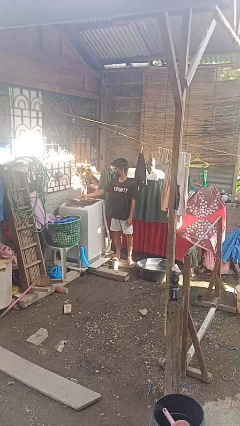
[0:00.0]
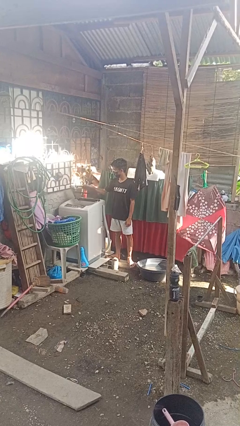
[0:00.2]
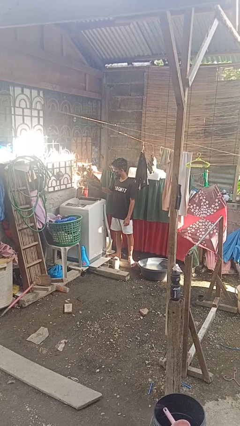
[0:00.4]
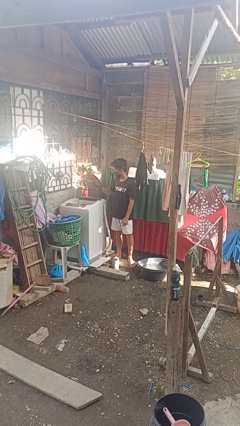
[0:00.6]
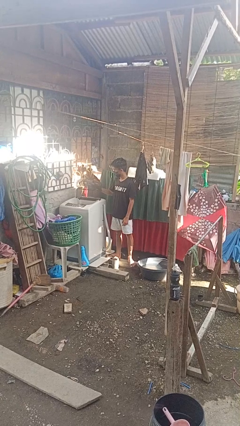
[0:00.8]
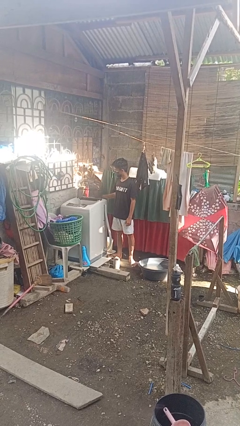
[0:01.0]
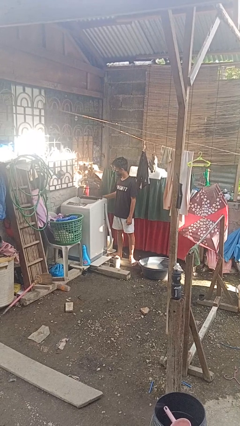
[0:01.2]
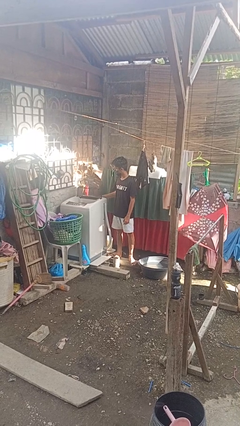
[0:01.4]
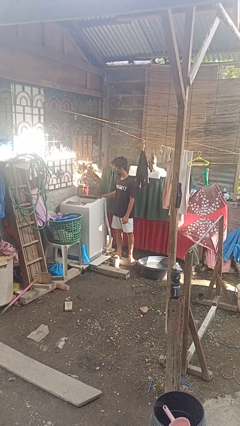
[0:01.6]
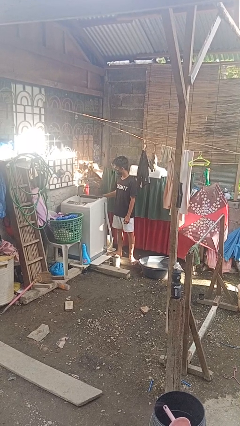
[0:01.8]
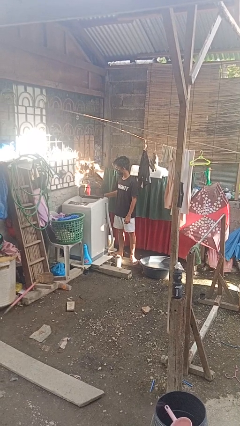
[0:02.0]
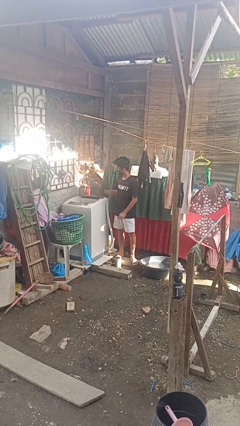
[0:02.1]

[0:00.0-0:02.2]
person opens clothes washer

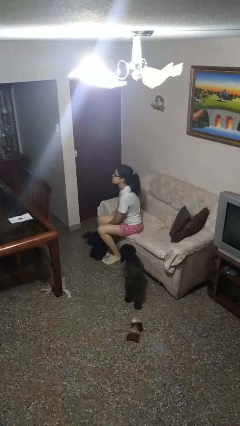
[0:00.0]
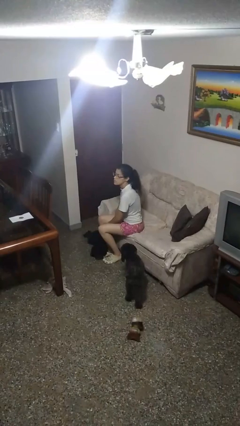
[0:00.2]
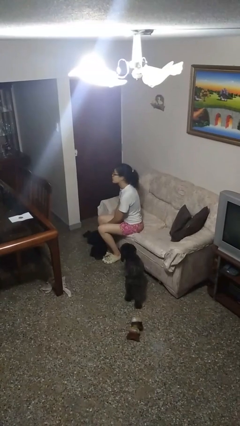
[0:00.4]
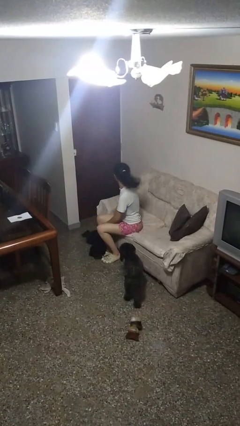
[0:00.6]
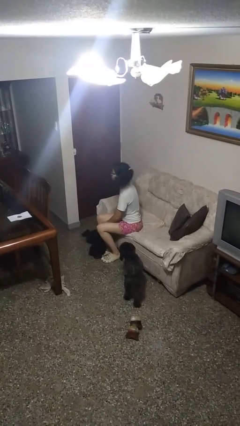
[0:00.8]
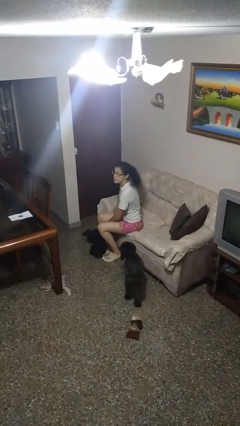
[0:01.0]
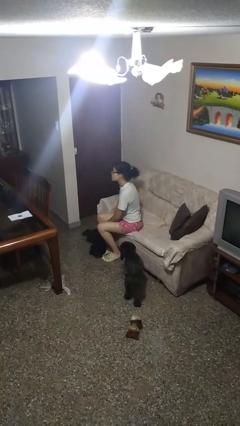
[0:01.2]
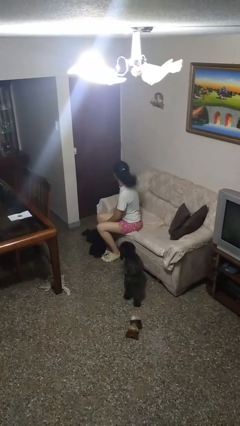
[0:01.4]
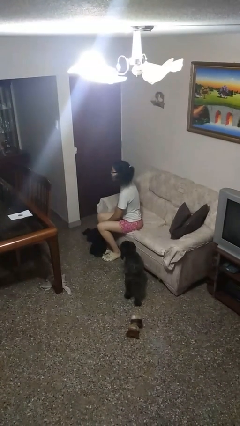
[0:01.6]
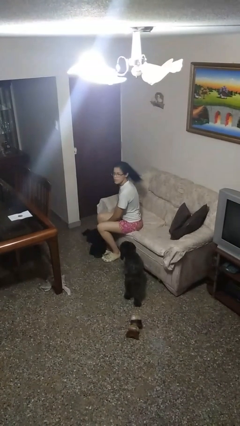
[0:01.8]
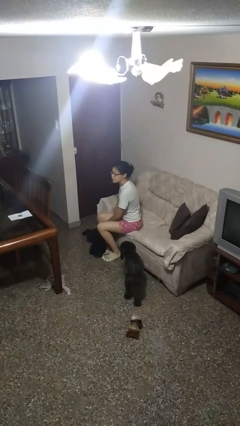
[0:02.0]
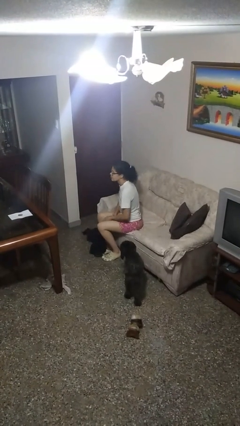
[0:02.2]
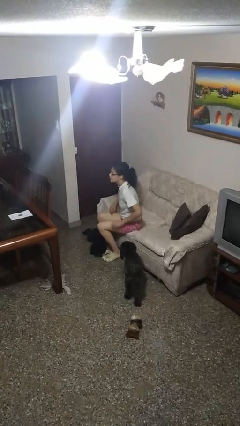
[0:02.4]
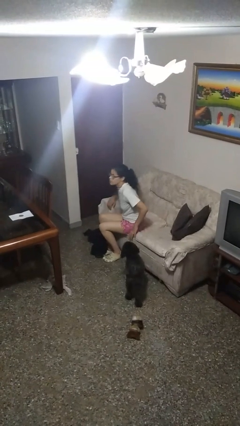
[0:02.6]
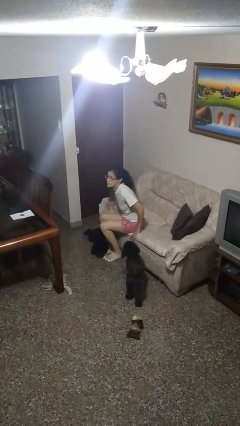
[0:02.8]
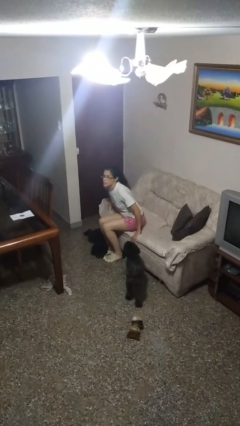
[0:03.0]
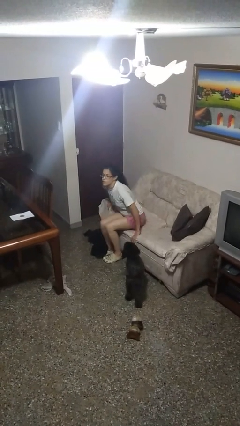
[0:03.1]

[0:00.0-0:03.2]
person shakes head

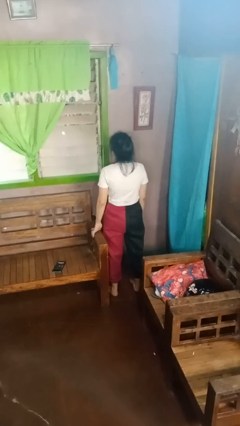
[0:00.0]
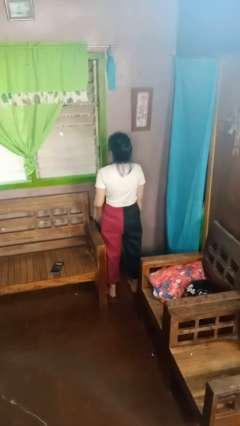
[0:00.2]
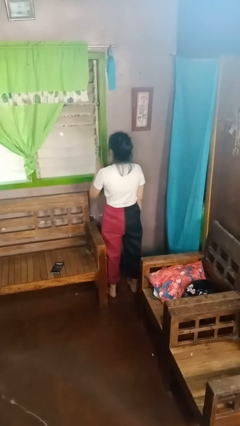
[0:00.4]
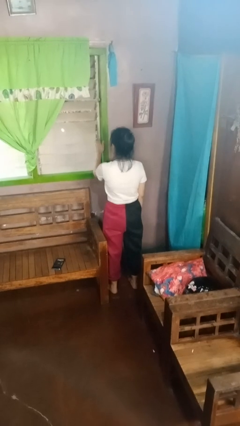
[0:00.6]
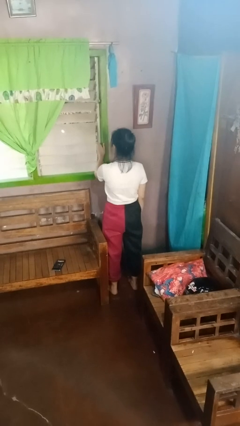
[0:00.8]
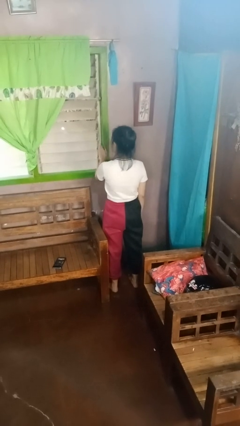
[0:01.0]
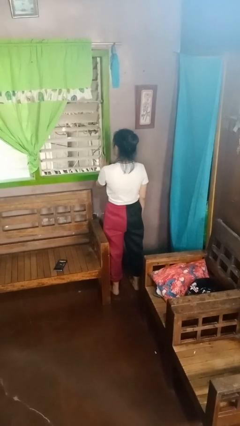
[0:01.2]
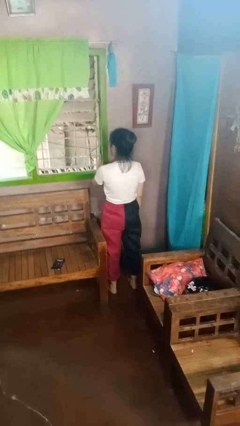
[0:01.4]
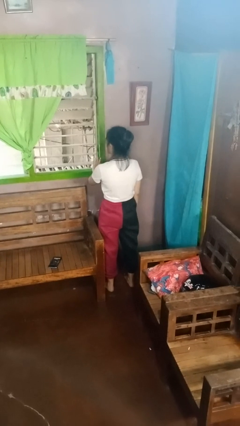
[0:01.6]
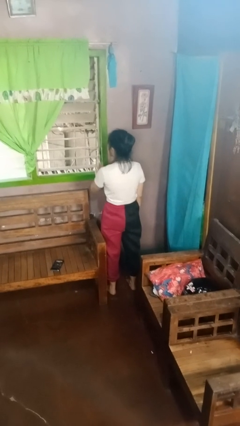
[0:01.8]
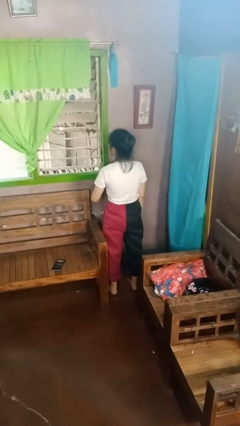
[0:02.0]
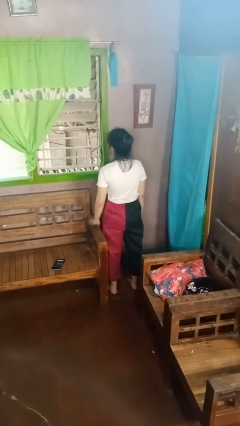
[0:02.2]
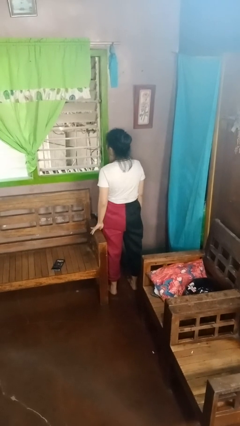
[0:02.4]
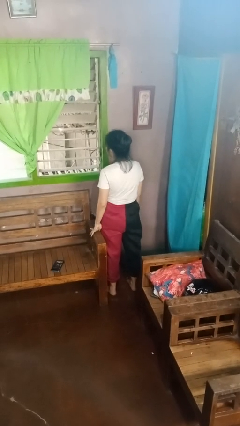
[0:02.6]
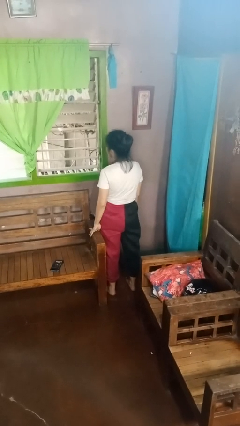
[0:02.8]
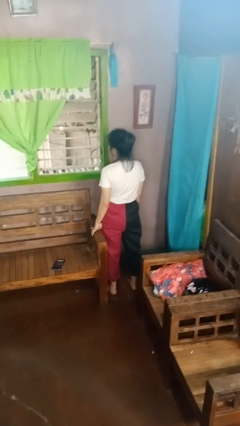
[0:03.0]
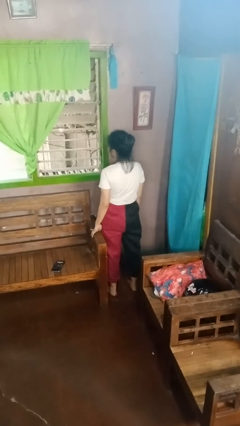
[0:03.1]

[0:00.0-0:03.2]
person opens home window

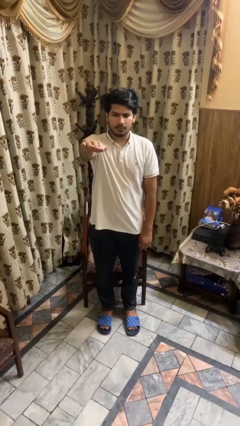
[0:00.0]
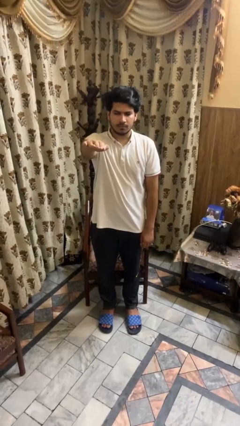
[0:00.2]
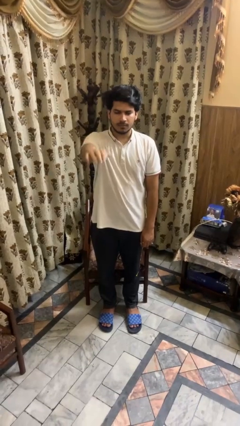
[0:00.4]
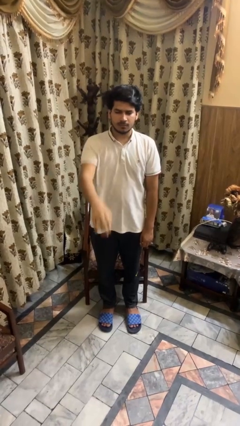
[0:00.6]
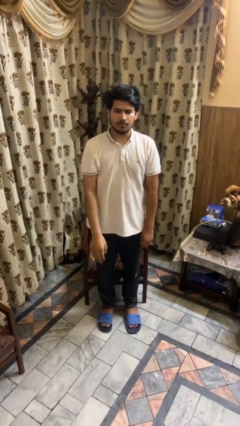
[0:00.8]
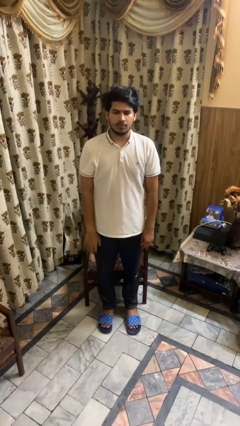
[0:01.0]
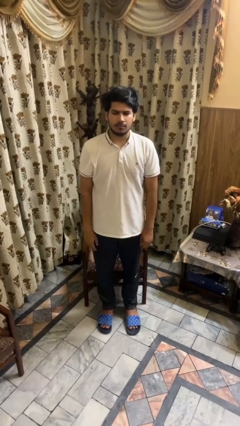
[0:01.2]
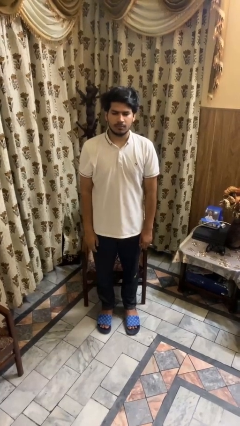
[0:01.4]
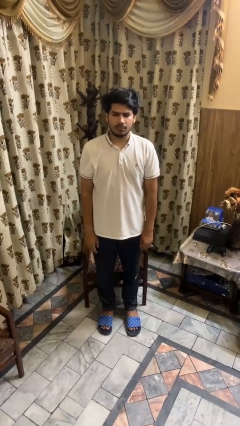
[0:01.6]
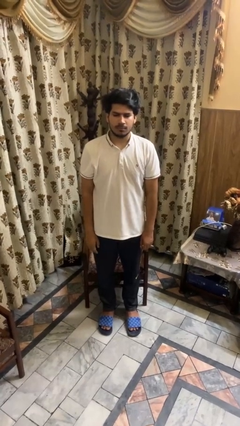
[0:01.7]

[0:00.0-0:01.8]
person gestures swipe down

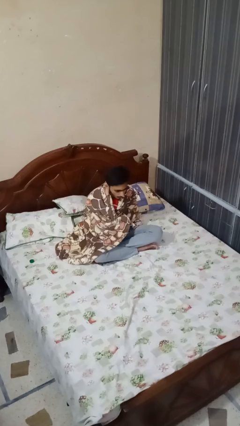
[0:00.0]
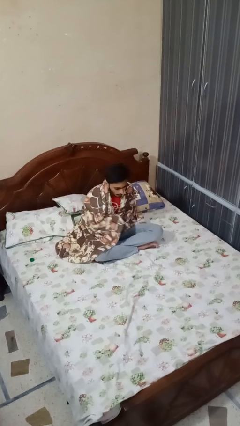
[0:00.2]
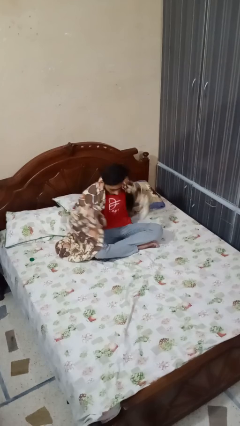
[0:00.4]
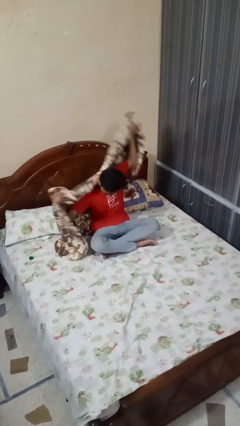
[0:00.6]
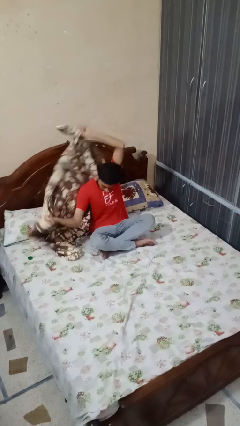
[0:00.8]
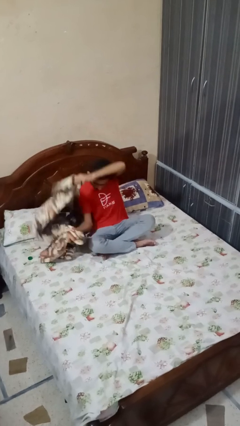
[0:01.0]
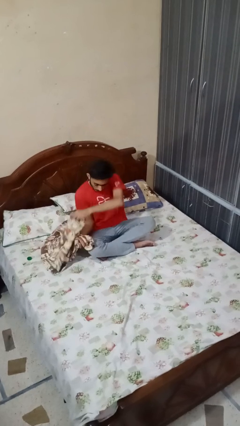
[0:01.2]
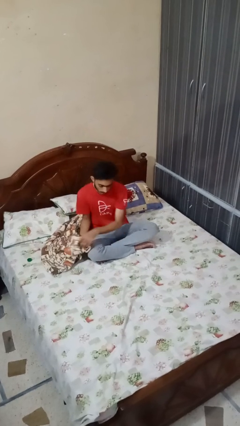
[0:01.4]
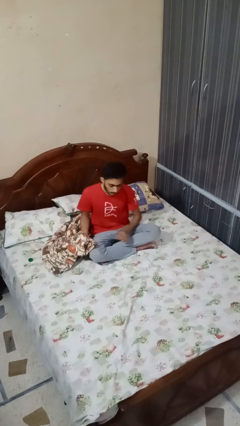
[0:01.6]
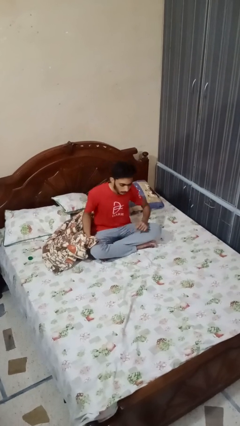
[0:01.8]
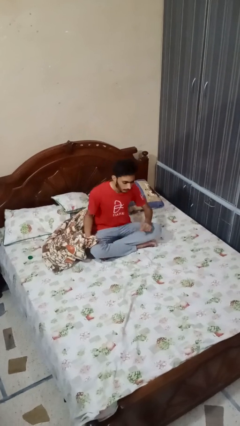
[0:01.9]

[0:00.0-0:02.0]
person uncovers with blanket

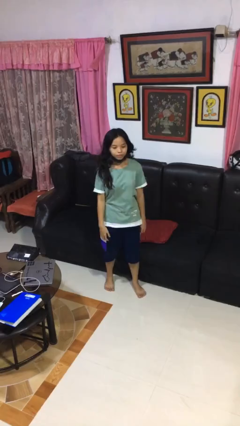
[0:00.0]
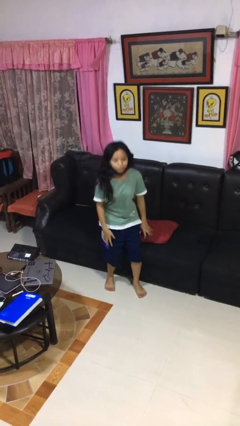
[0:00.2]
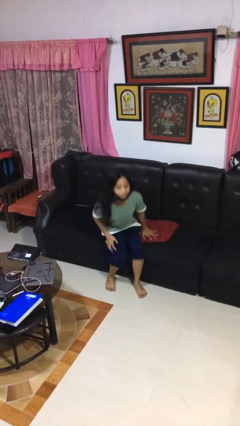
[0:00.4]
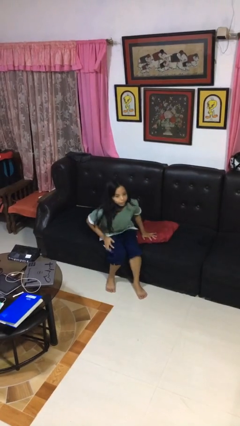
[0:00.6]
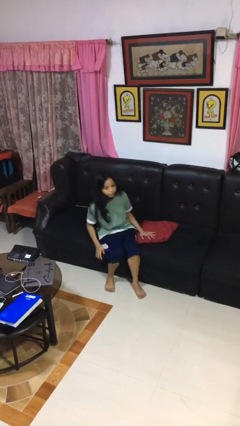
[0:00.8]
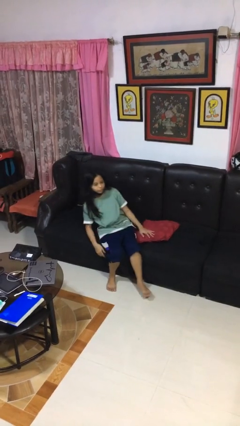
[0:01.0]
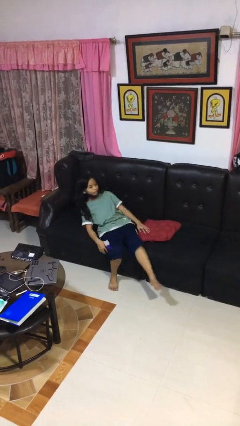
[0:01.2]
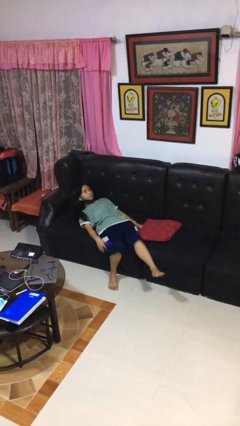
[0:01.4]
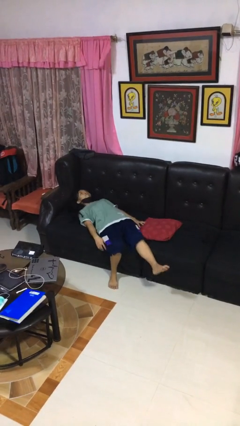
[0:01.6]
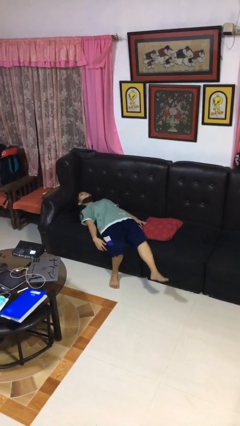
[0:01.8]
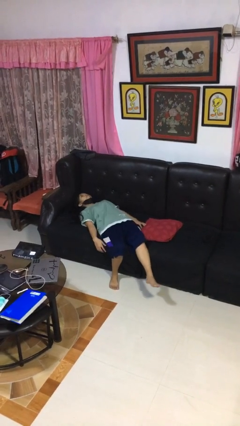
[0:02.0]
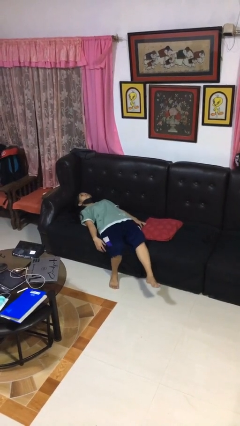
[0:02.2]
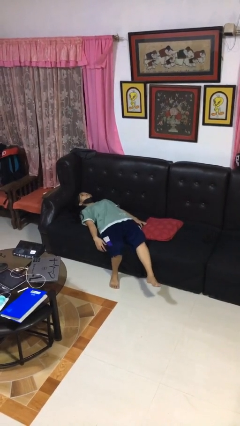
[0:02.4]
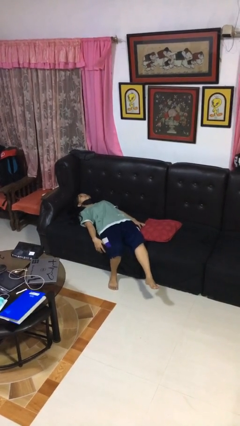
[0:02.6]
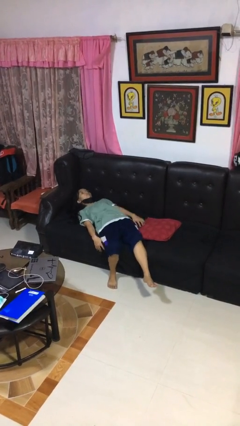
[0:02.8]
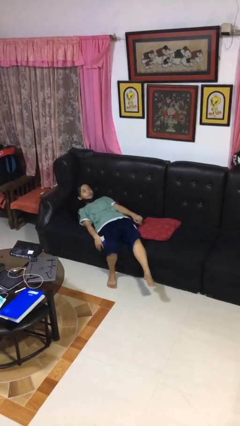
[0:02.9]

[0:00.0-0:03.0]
person lies down on couch

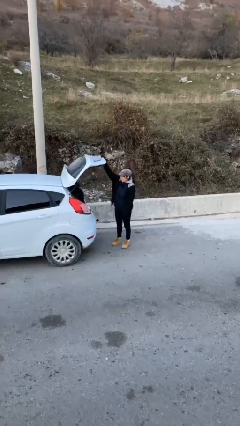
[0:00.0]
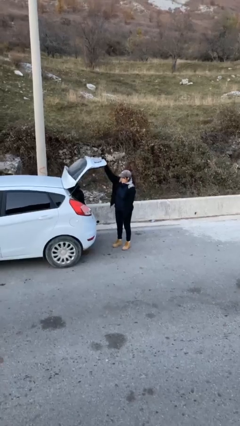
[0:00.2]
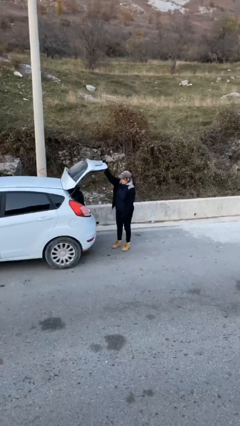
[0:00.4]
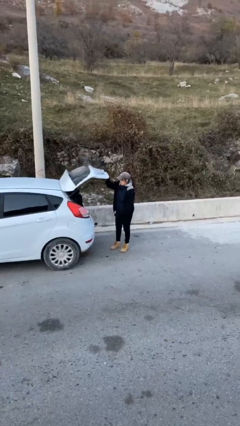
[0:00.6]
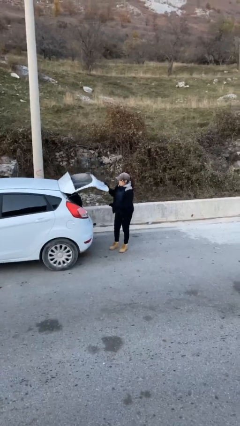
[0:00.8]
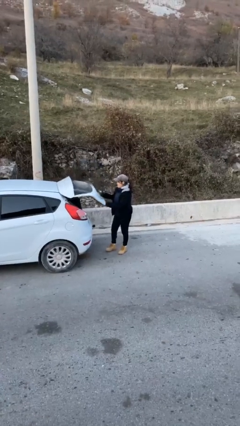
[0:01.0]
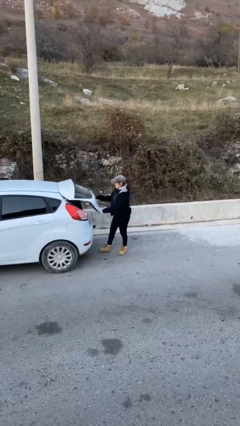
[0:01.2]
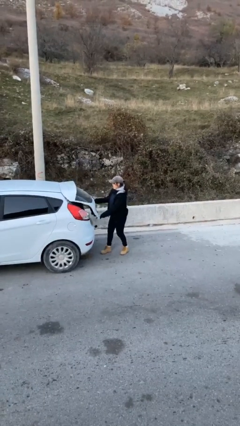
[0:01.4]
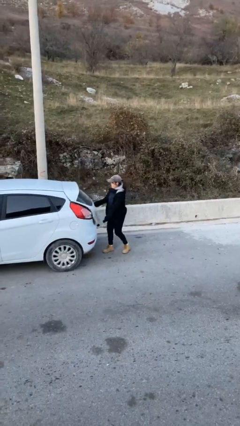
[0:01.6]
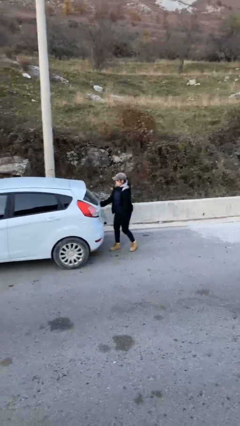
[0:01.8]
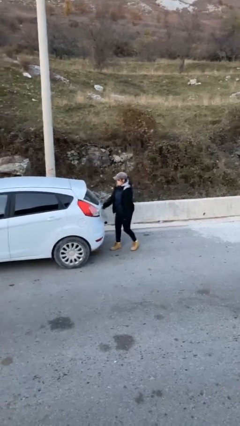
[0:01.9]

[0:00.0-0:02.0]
person closes car trunk
